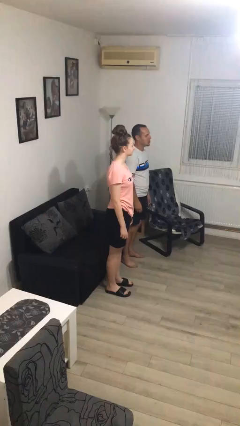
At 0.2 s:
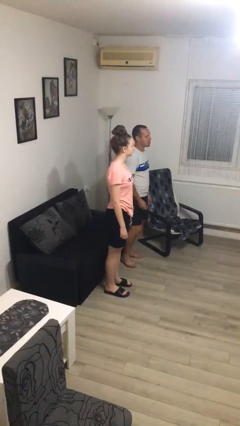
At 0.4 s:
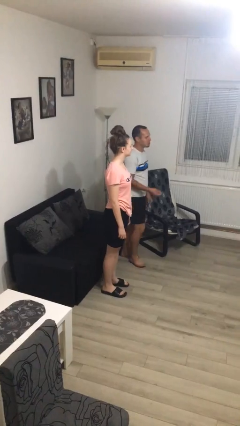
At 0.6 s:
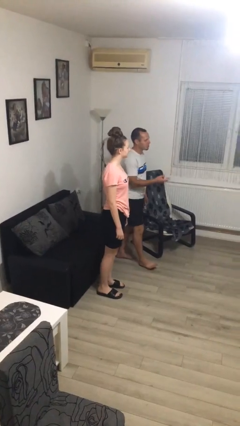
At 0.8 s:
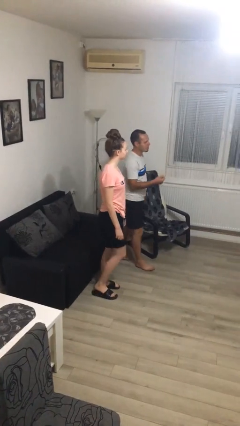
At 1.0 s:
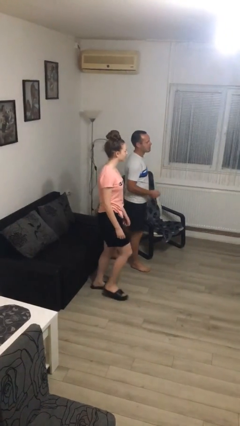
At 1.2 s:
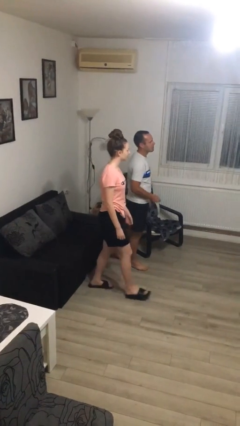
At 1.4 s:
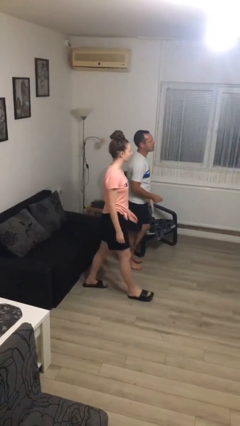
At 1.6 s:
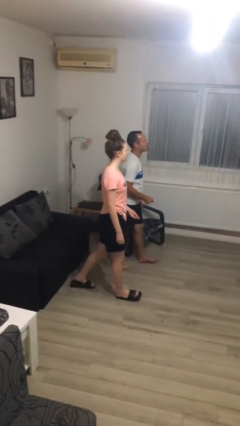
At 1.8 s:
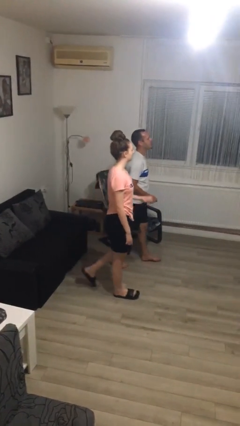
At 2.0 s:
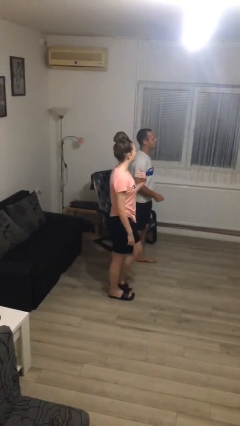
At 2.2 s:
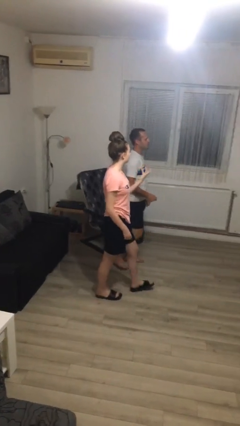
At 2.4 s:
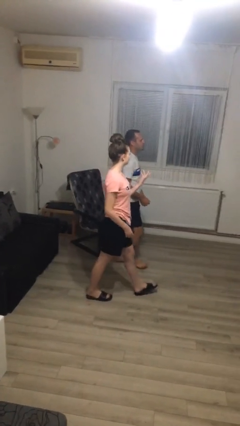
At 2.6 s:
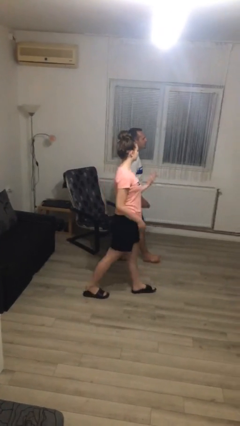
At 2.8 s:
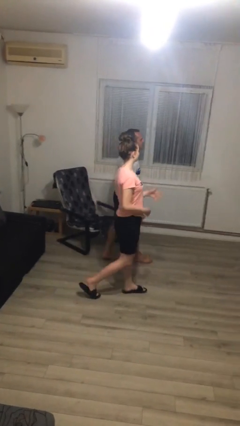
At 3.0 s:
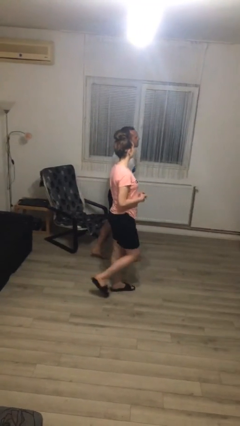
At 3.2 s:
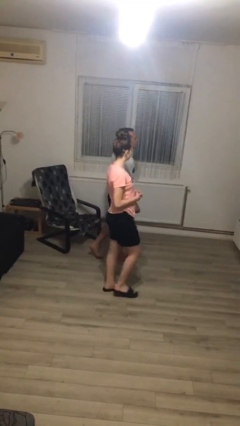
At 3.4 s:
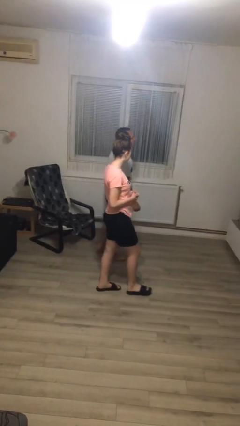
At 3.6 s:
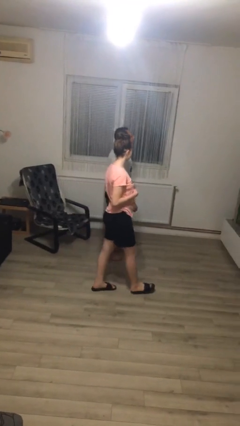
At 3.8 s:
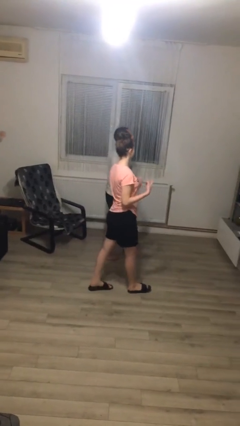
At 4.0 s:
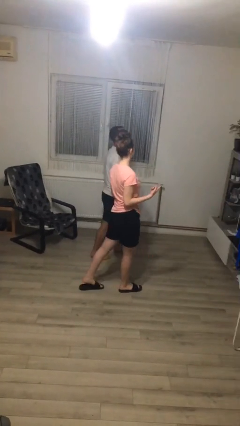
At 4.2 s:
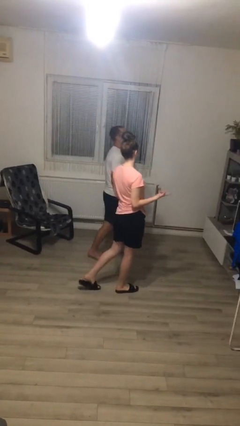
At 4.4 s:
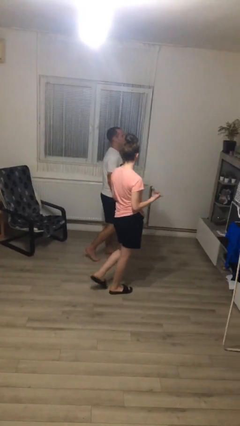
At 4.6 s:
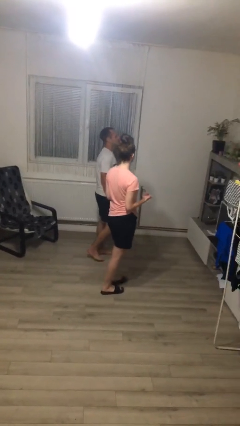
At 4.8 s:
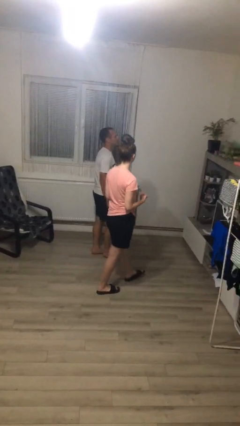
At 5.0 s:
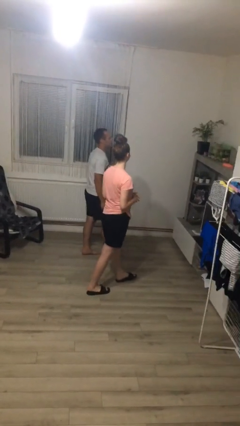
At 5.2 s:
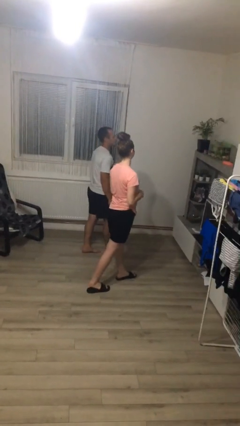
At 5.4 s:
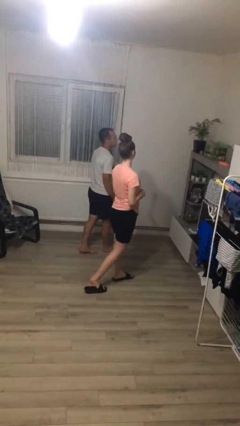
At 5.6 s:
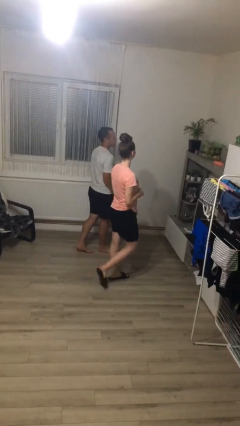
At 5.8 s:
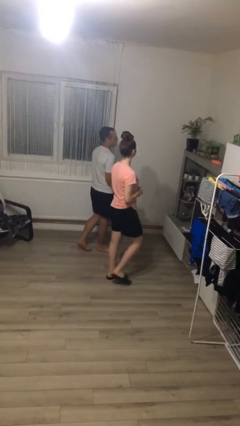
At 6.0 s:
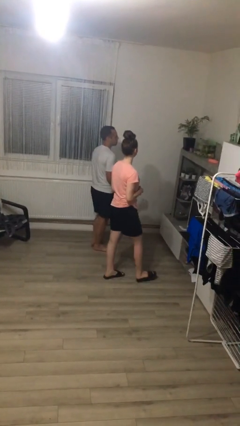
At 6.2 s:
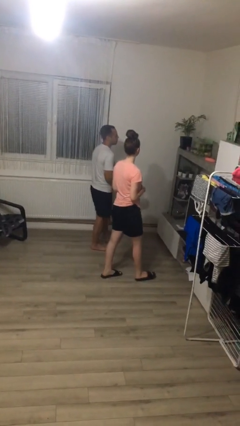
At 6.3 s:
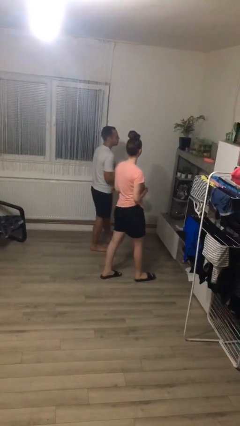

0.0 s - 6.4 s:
person talks to person

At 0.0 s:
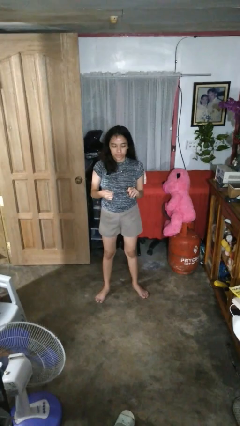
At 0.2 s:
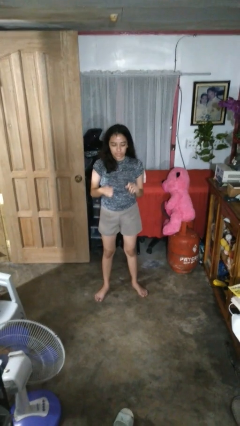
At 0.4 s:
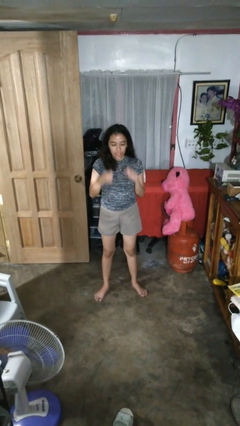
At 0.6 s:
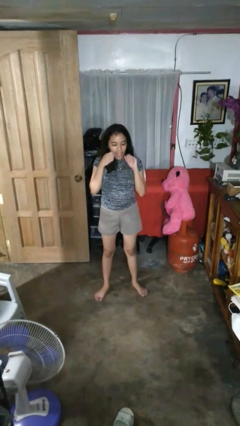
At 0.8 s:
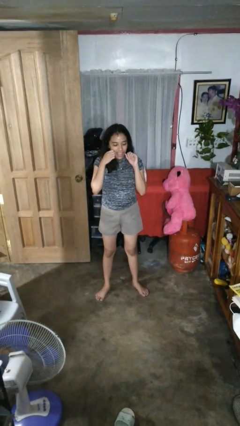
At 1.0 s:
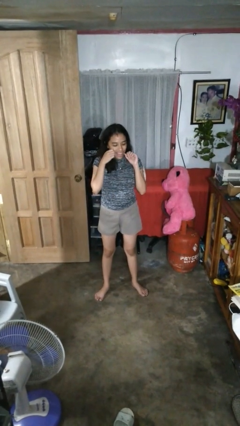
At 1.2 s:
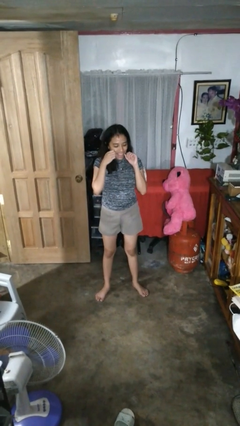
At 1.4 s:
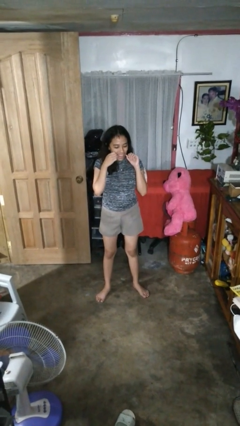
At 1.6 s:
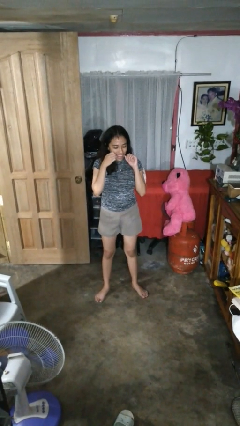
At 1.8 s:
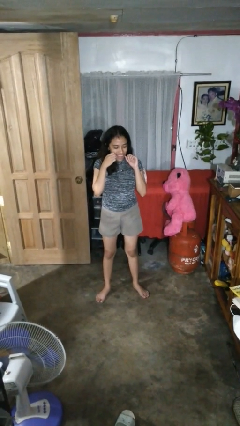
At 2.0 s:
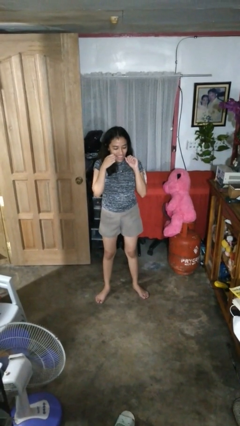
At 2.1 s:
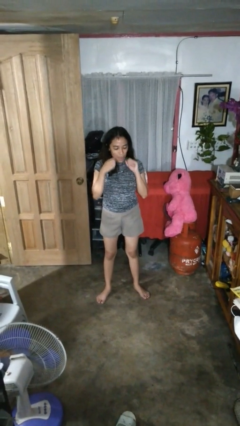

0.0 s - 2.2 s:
person flosses

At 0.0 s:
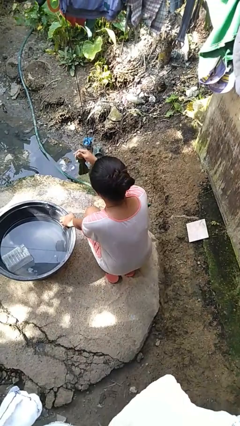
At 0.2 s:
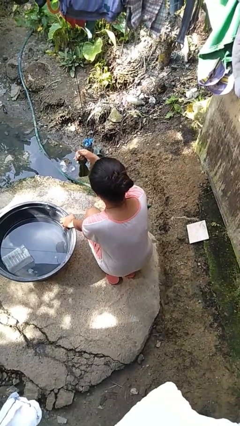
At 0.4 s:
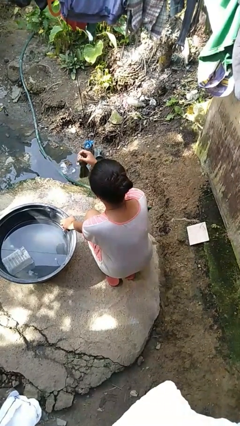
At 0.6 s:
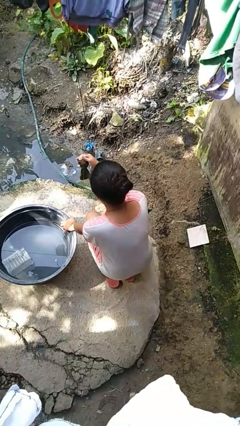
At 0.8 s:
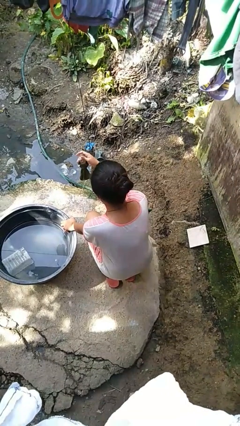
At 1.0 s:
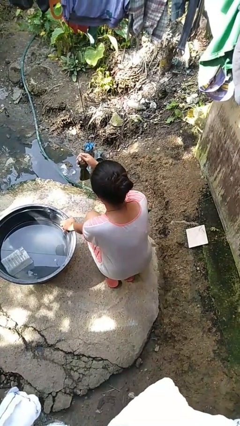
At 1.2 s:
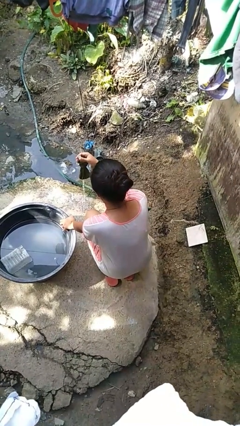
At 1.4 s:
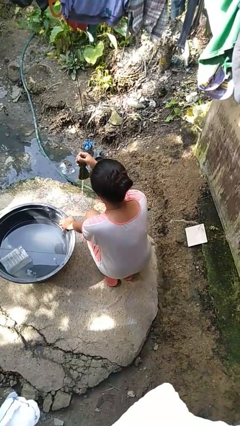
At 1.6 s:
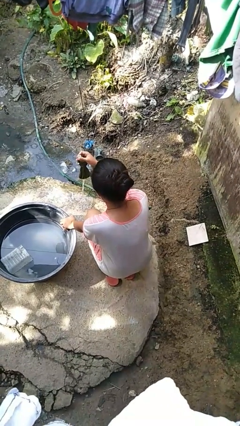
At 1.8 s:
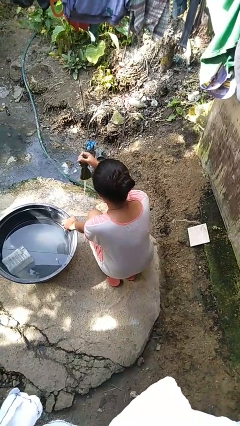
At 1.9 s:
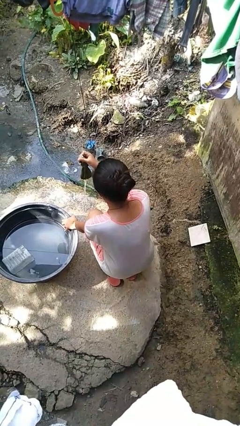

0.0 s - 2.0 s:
person turns on faucet

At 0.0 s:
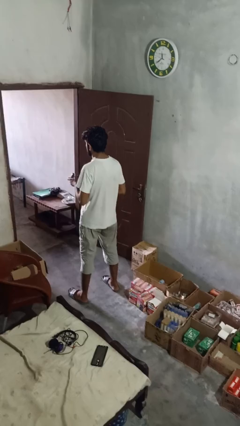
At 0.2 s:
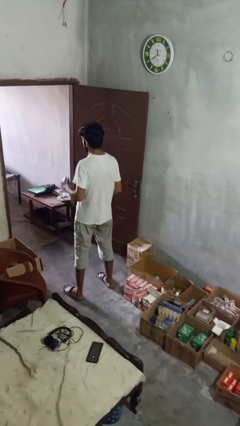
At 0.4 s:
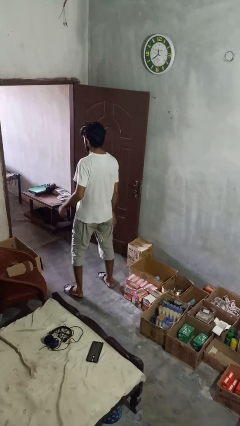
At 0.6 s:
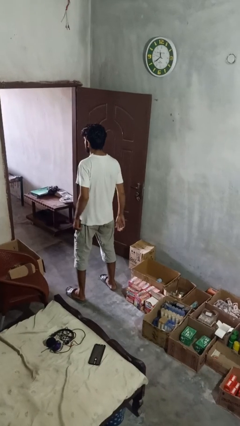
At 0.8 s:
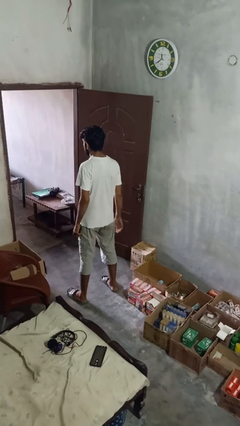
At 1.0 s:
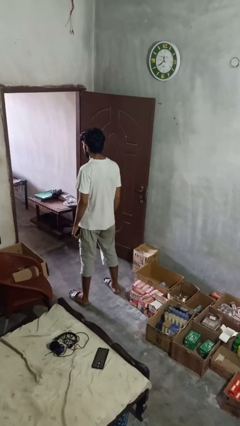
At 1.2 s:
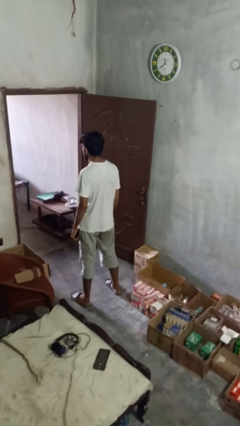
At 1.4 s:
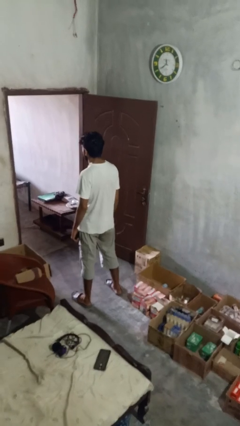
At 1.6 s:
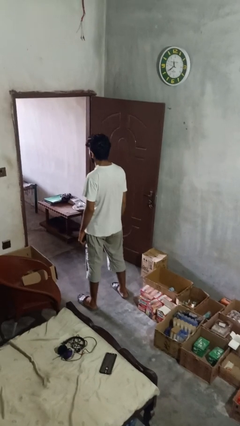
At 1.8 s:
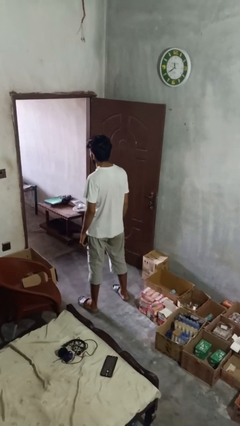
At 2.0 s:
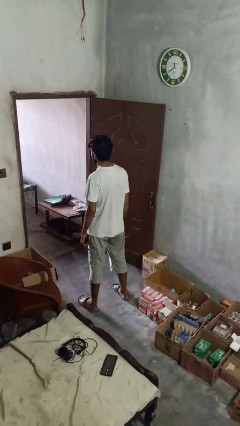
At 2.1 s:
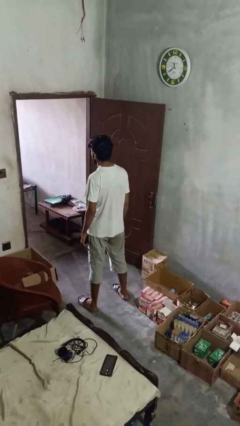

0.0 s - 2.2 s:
person puts object into purse

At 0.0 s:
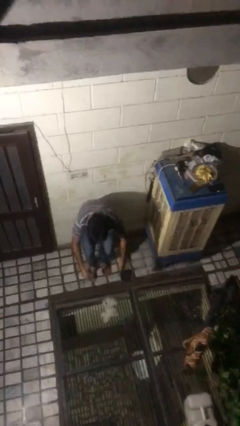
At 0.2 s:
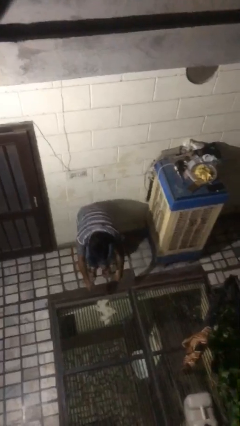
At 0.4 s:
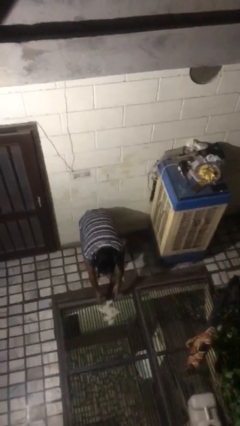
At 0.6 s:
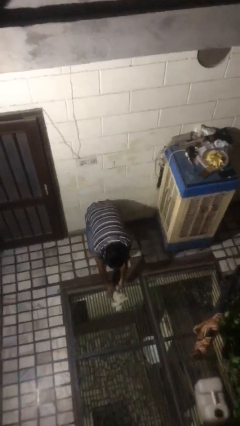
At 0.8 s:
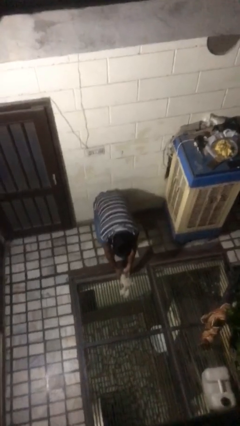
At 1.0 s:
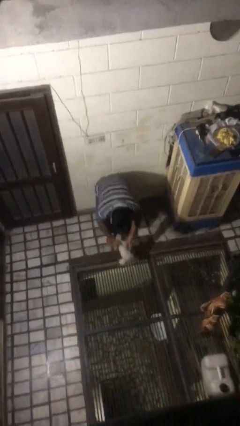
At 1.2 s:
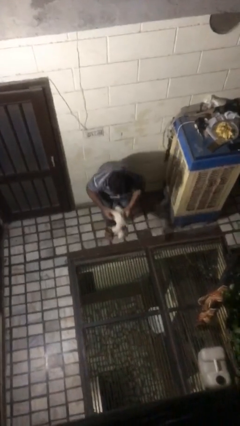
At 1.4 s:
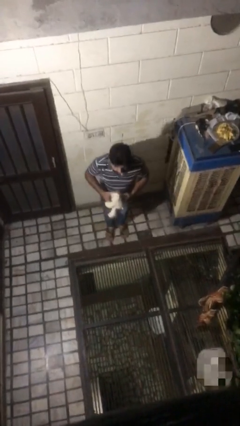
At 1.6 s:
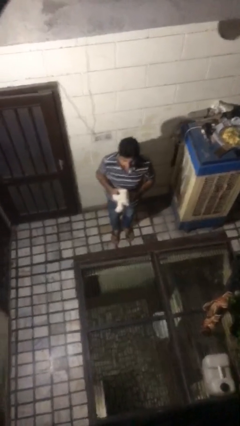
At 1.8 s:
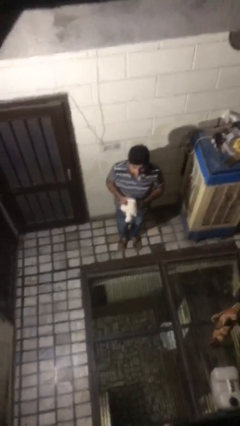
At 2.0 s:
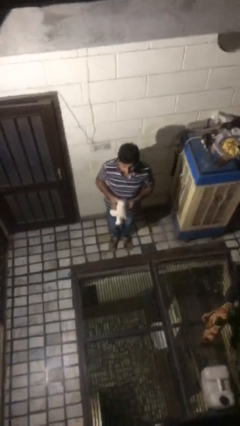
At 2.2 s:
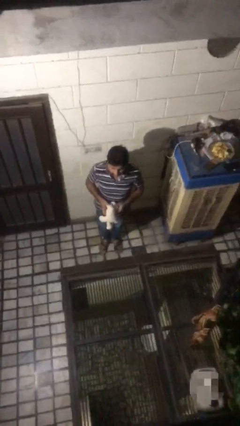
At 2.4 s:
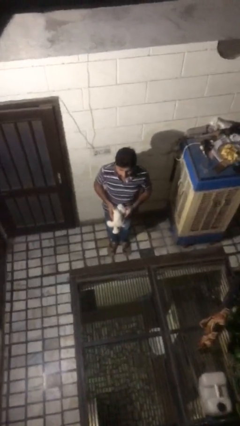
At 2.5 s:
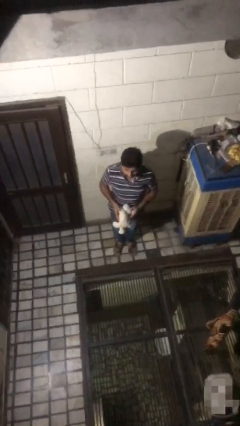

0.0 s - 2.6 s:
person picks up object from floor

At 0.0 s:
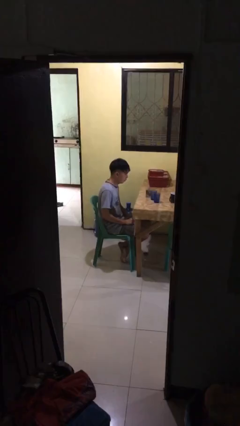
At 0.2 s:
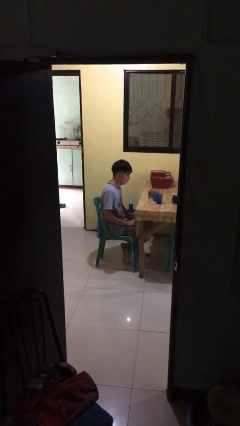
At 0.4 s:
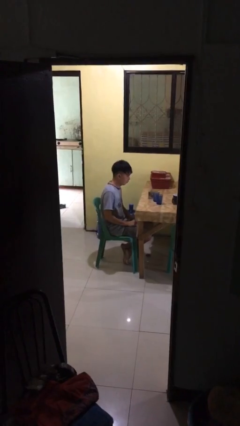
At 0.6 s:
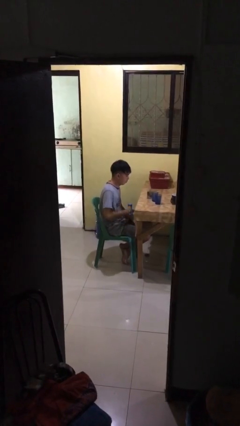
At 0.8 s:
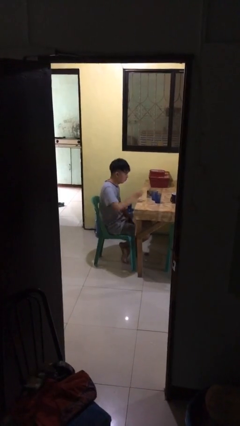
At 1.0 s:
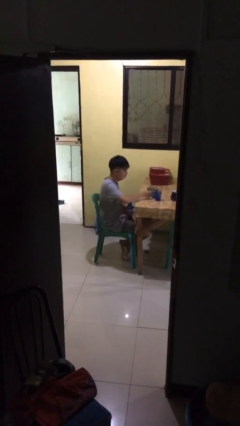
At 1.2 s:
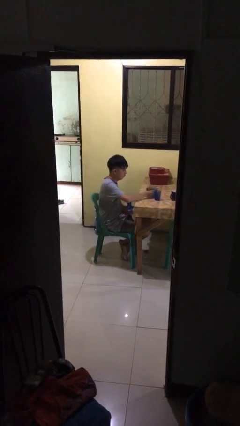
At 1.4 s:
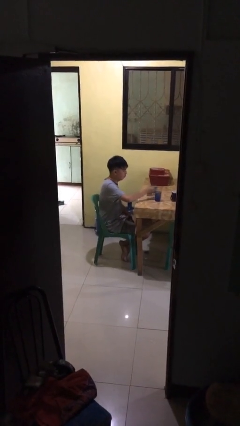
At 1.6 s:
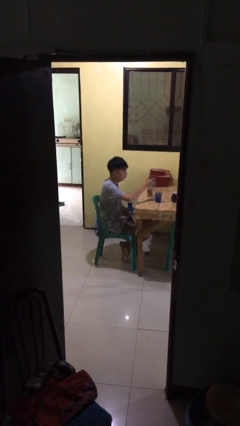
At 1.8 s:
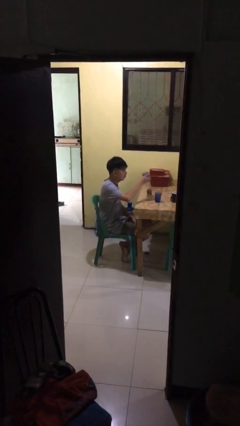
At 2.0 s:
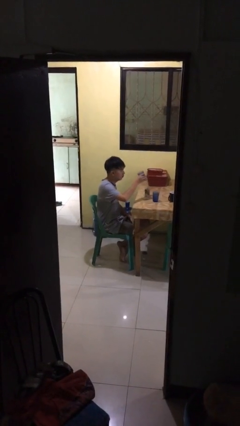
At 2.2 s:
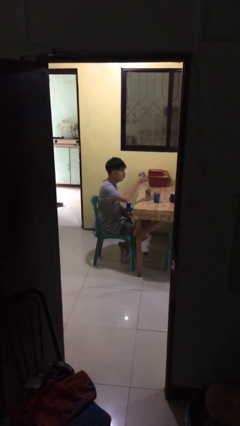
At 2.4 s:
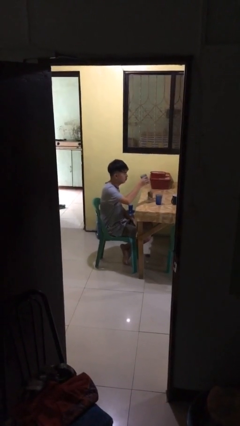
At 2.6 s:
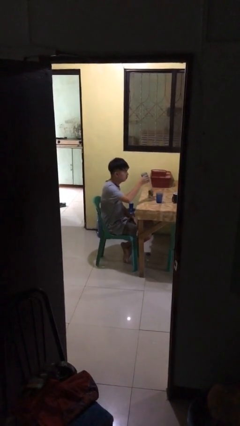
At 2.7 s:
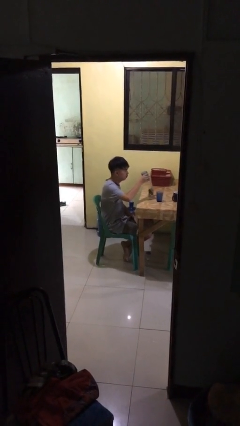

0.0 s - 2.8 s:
person picks up object from table
